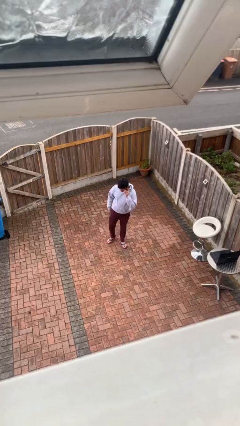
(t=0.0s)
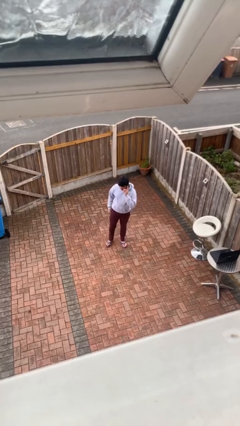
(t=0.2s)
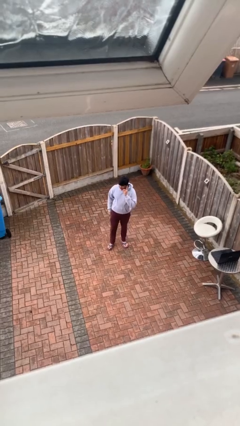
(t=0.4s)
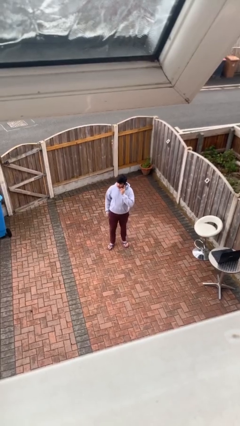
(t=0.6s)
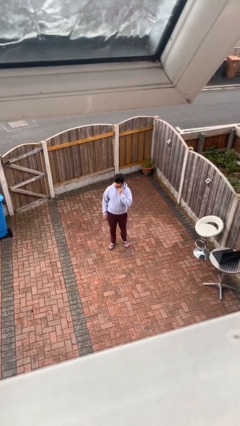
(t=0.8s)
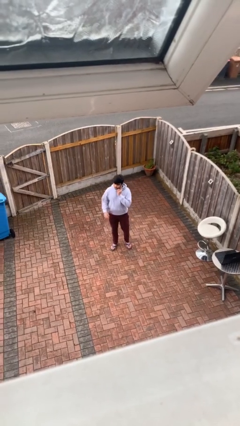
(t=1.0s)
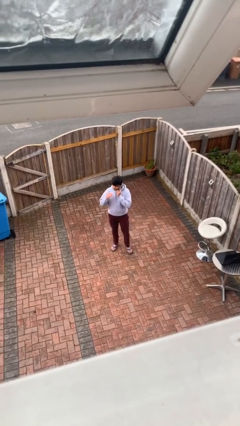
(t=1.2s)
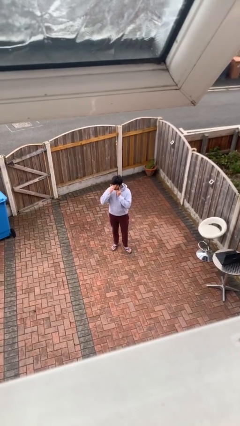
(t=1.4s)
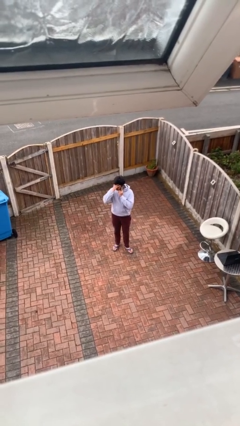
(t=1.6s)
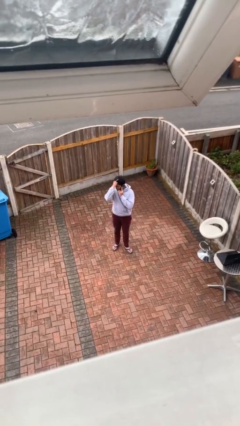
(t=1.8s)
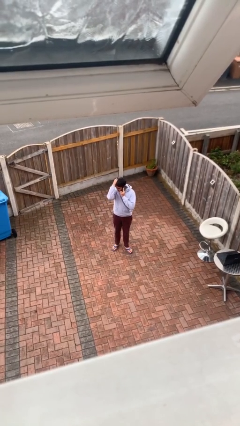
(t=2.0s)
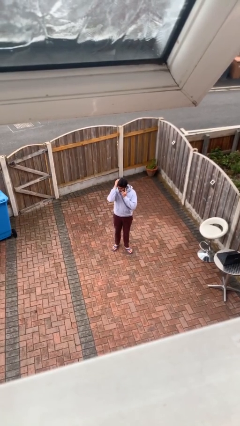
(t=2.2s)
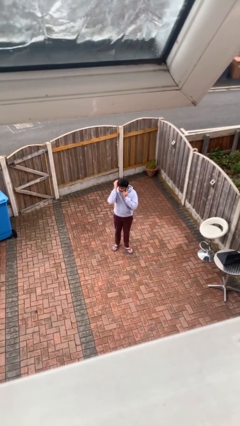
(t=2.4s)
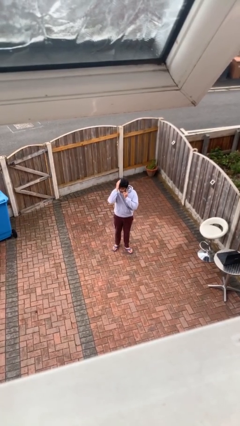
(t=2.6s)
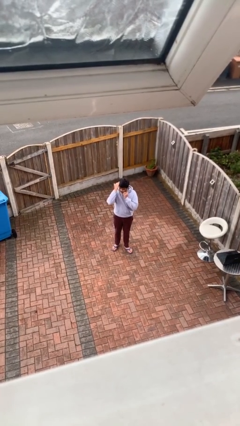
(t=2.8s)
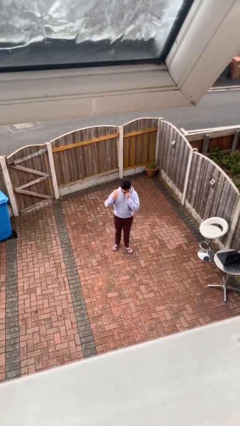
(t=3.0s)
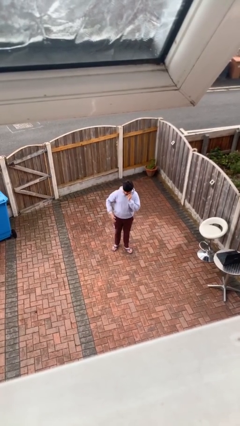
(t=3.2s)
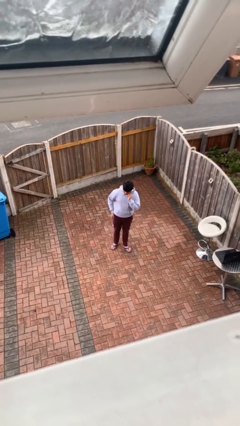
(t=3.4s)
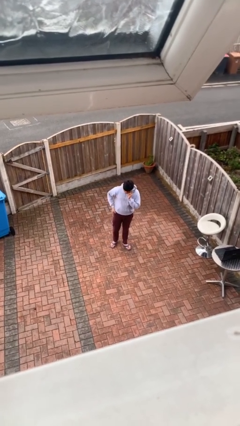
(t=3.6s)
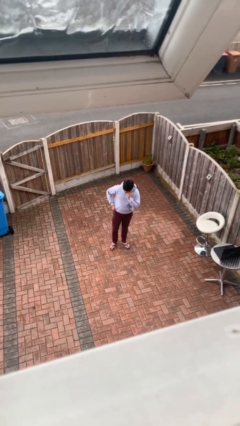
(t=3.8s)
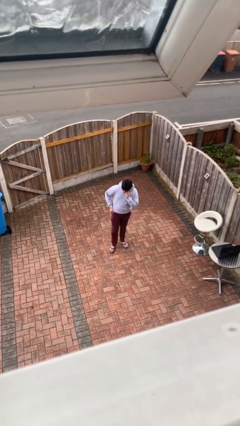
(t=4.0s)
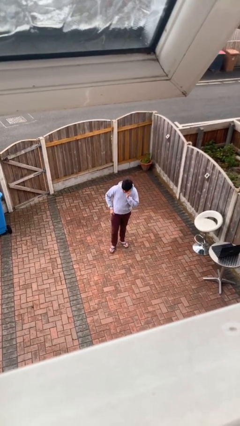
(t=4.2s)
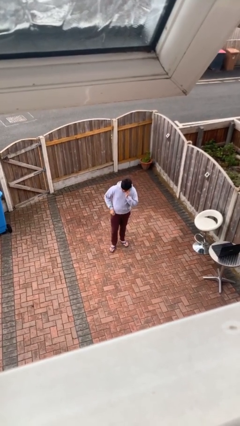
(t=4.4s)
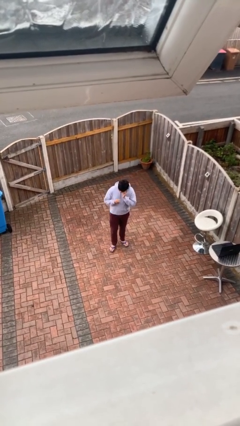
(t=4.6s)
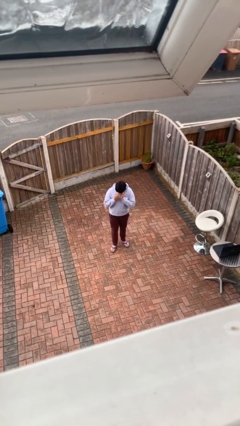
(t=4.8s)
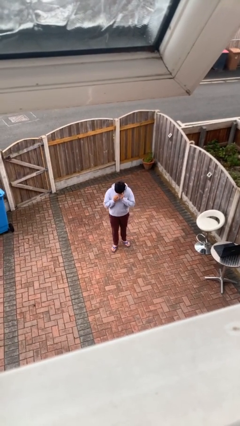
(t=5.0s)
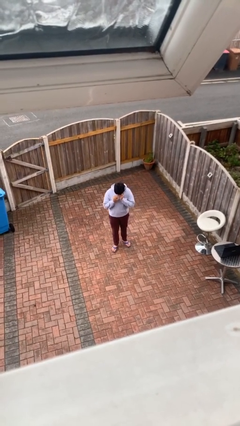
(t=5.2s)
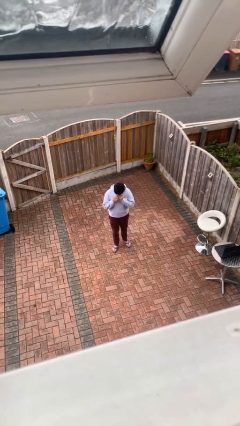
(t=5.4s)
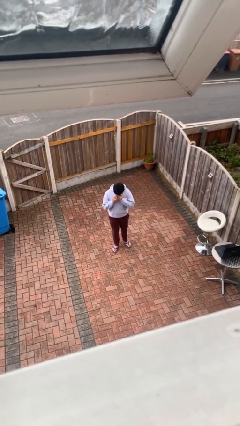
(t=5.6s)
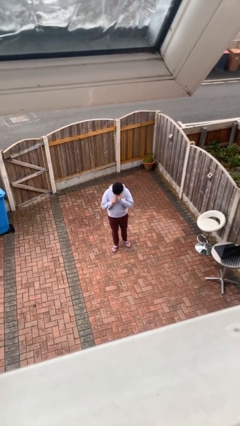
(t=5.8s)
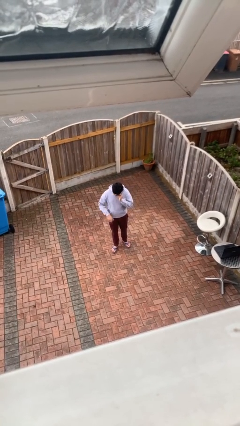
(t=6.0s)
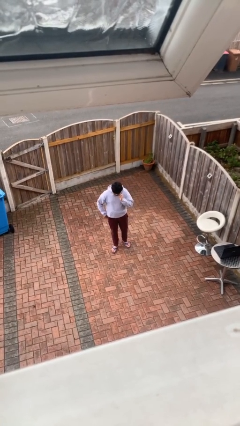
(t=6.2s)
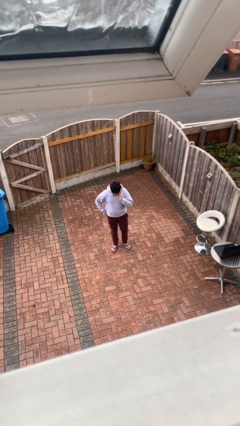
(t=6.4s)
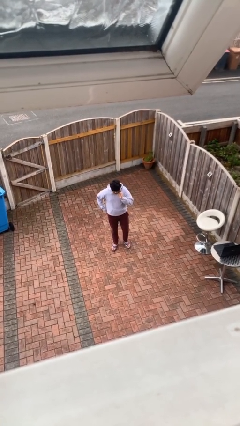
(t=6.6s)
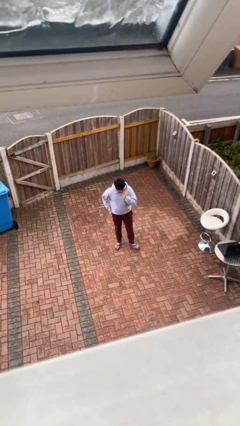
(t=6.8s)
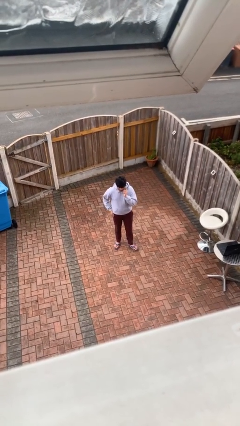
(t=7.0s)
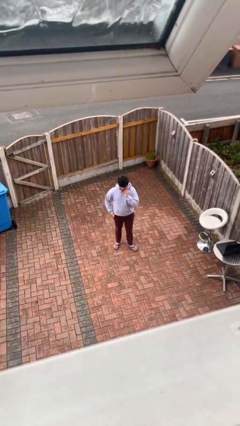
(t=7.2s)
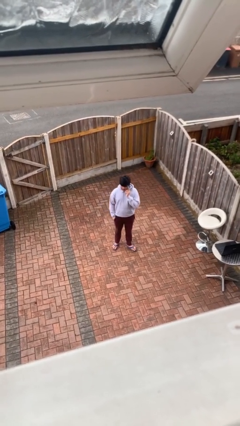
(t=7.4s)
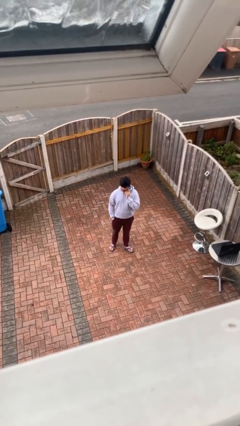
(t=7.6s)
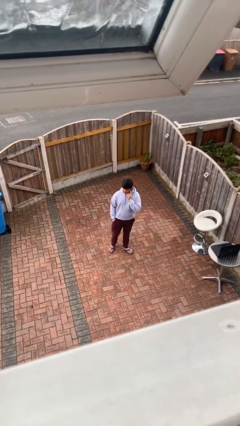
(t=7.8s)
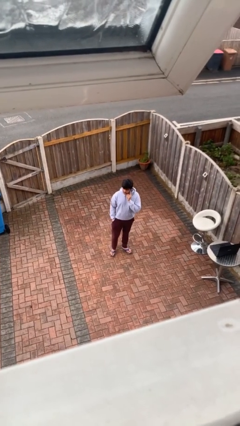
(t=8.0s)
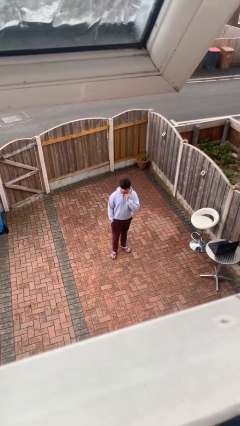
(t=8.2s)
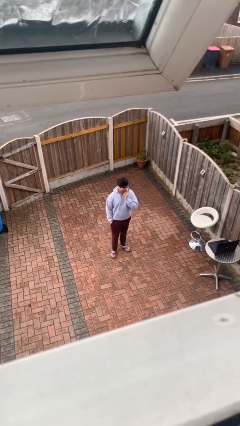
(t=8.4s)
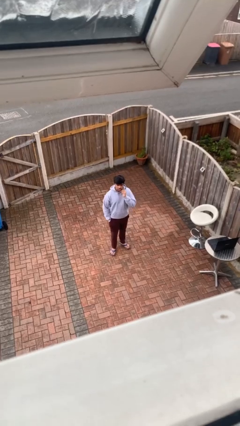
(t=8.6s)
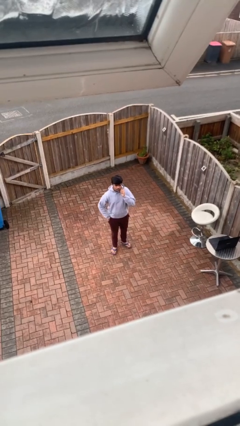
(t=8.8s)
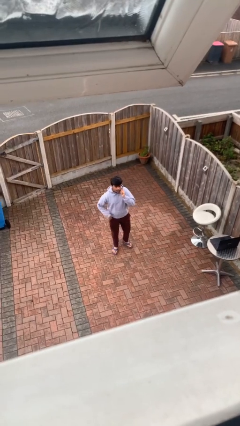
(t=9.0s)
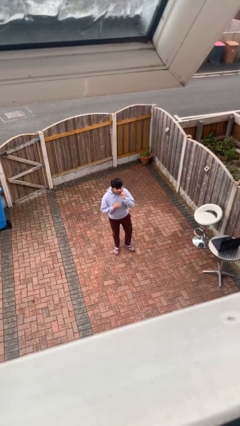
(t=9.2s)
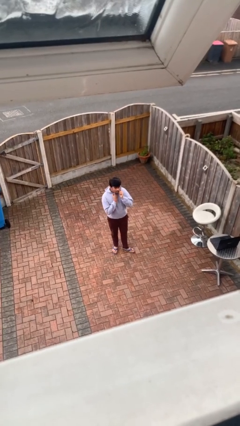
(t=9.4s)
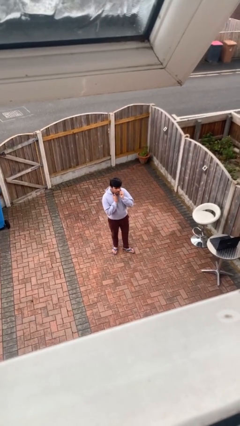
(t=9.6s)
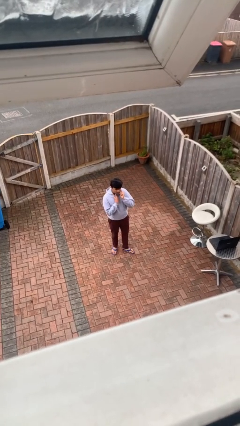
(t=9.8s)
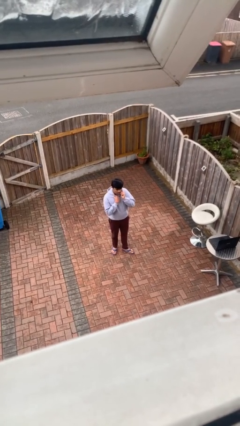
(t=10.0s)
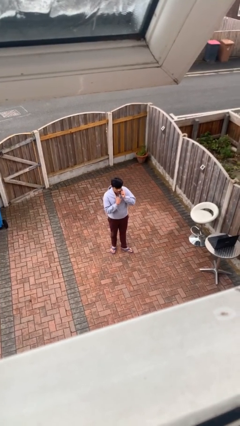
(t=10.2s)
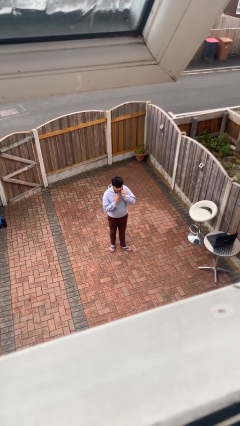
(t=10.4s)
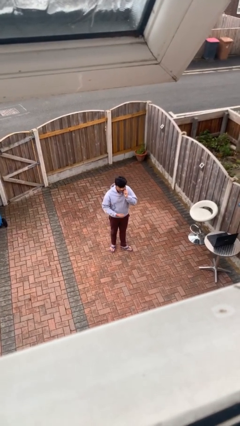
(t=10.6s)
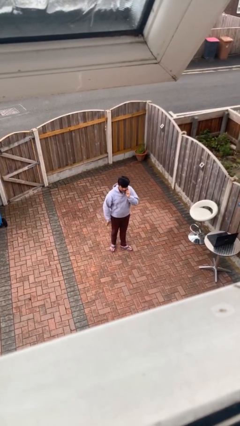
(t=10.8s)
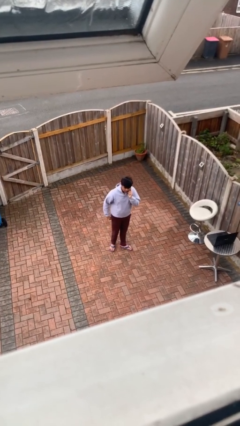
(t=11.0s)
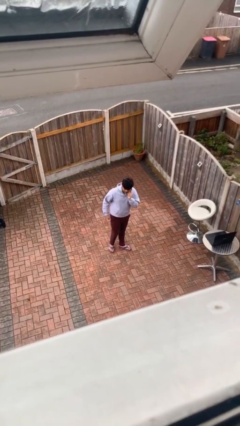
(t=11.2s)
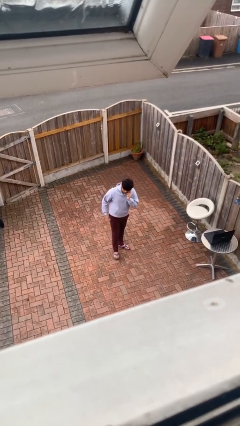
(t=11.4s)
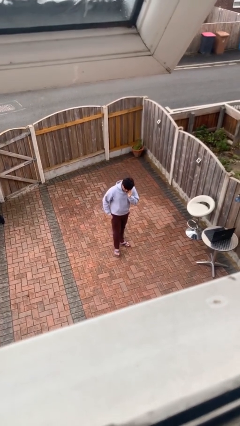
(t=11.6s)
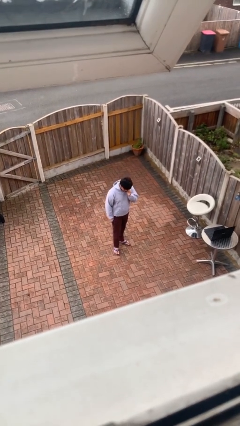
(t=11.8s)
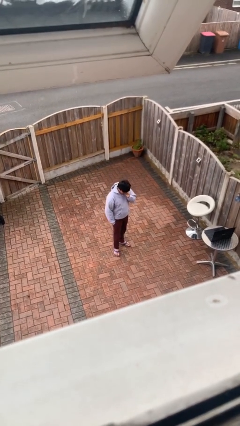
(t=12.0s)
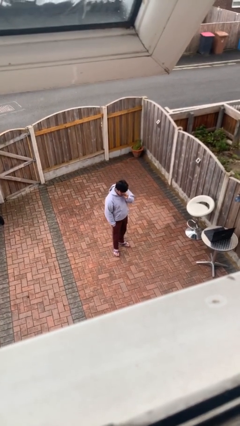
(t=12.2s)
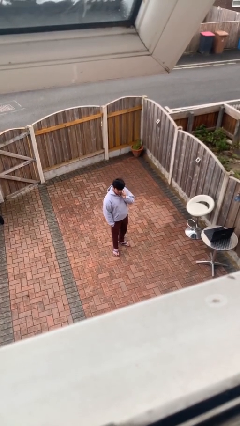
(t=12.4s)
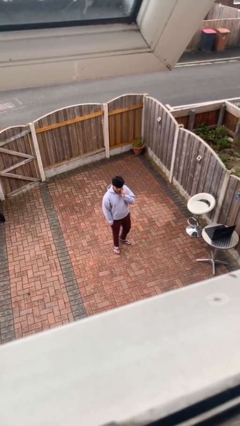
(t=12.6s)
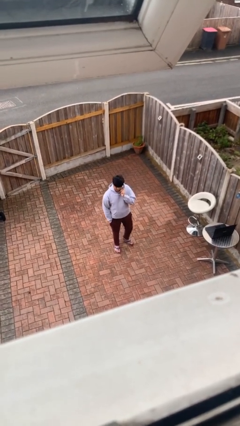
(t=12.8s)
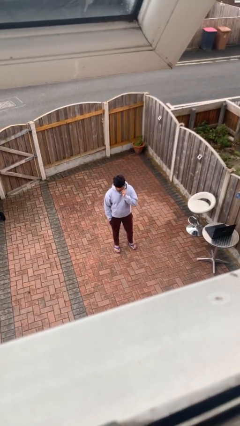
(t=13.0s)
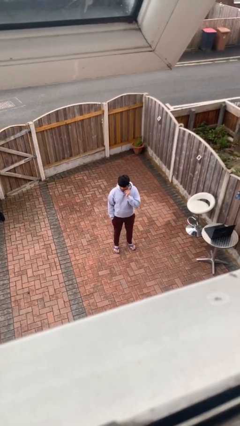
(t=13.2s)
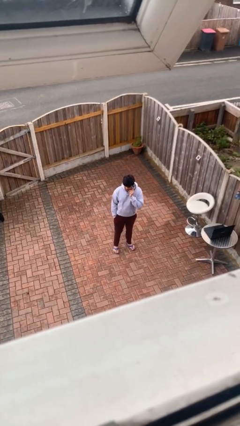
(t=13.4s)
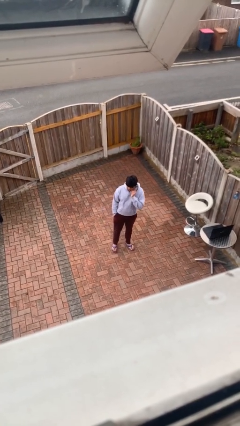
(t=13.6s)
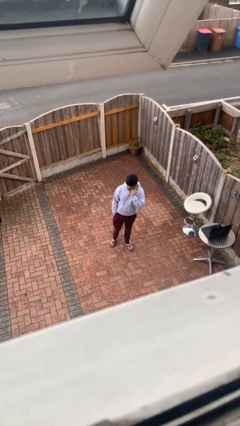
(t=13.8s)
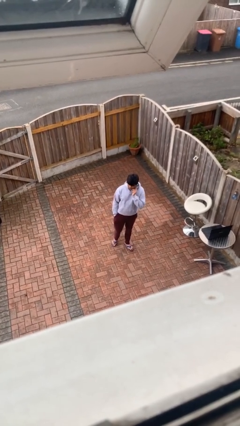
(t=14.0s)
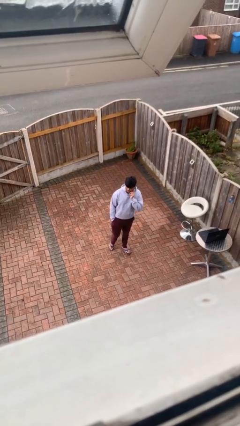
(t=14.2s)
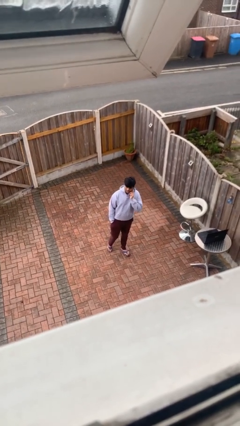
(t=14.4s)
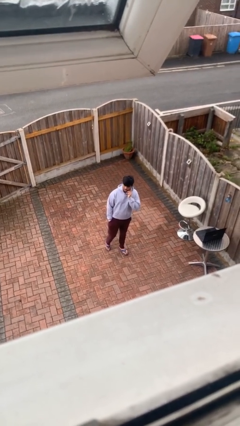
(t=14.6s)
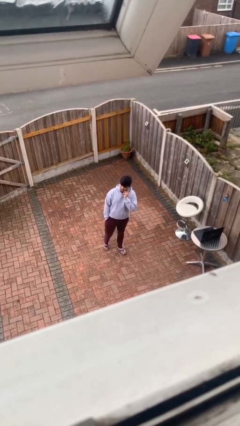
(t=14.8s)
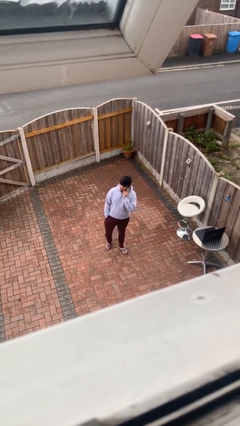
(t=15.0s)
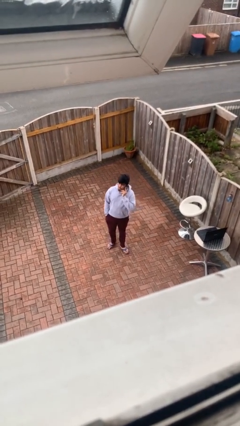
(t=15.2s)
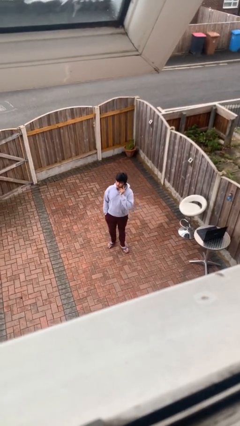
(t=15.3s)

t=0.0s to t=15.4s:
person talks on phone

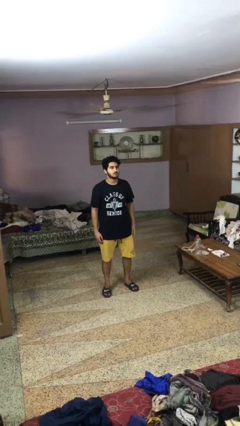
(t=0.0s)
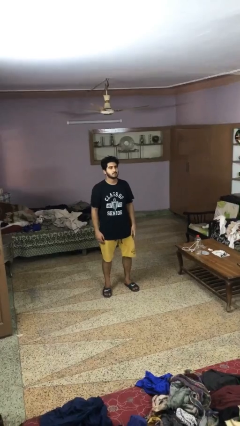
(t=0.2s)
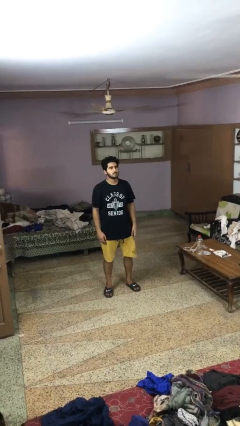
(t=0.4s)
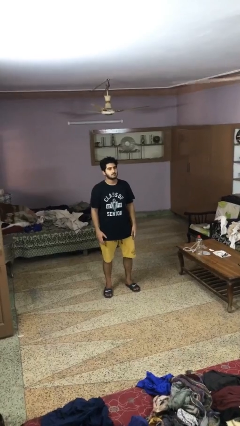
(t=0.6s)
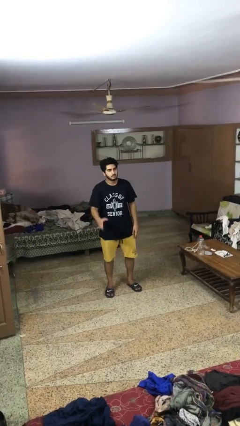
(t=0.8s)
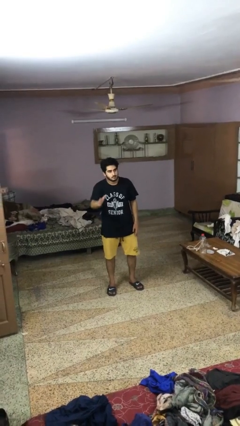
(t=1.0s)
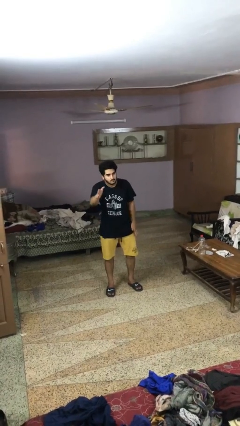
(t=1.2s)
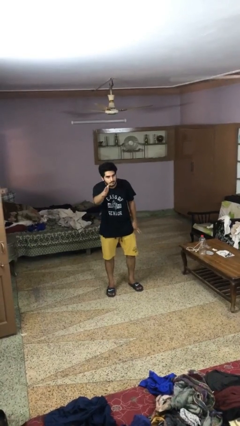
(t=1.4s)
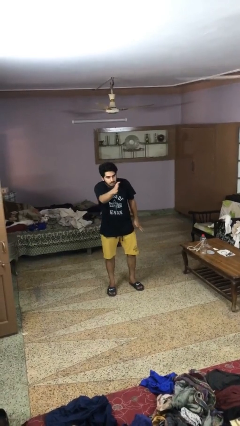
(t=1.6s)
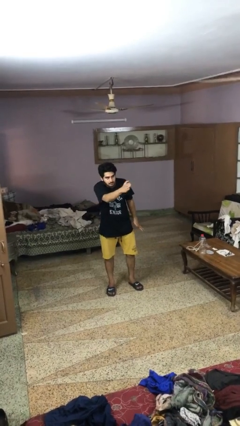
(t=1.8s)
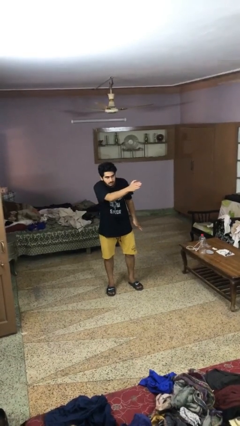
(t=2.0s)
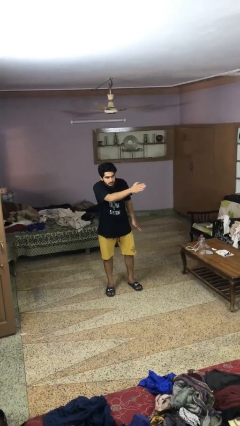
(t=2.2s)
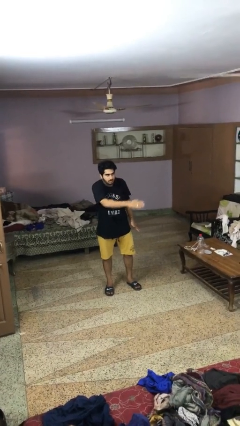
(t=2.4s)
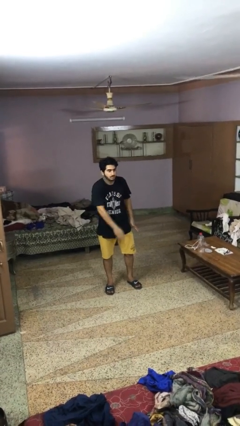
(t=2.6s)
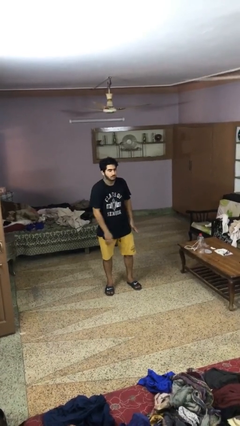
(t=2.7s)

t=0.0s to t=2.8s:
person gestures swipe left
